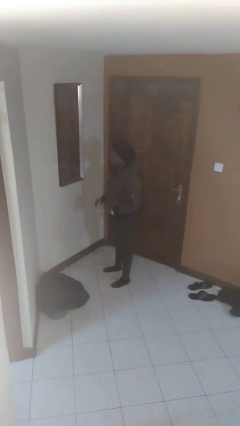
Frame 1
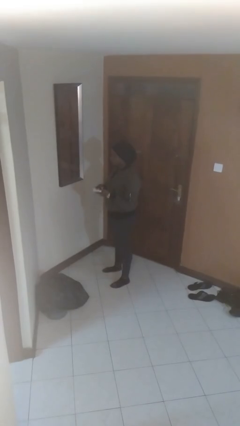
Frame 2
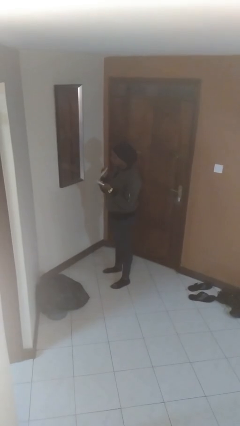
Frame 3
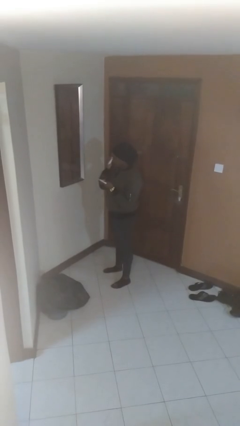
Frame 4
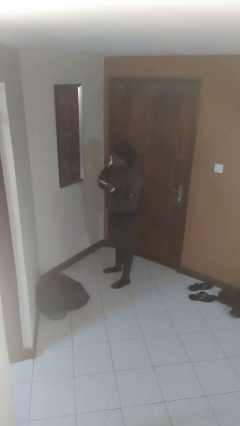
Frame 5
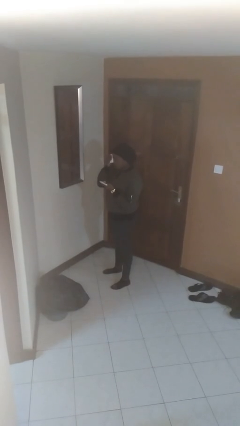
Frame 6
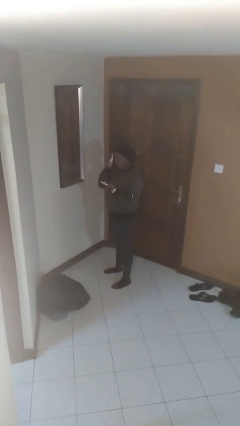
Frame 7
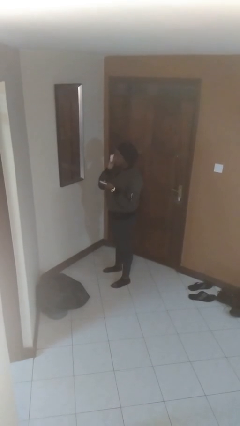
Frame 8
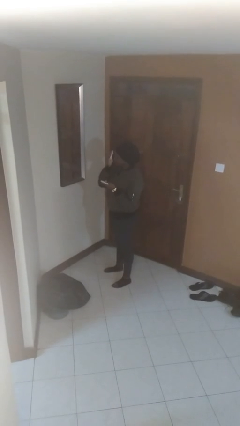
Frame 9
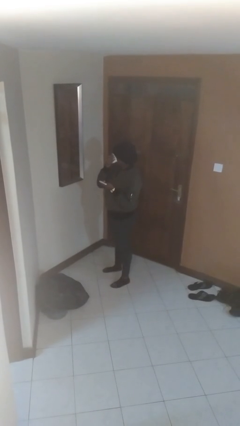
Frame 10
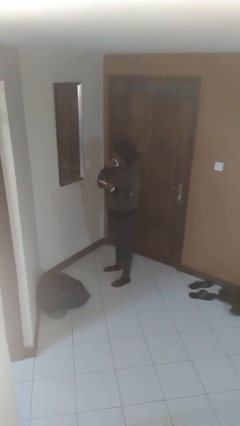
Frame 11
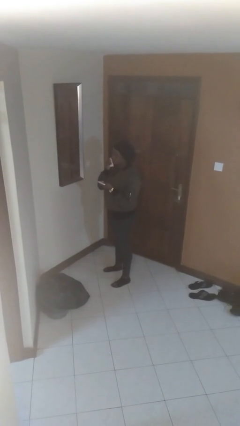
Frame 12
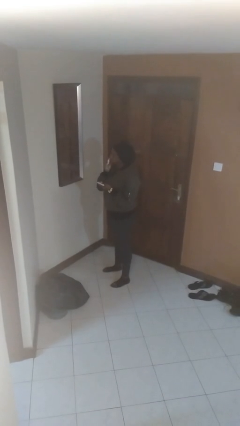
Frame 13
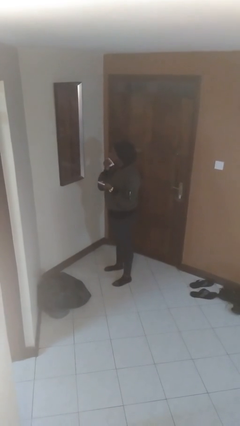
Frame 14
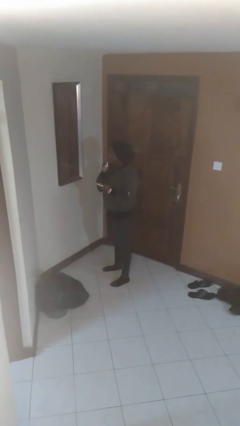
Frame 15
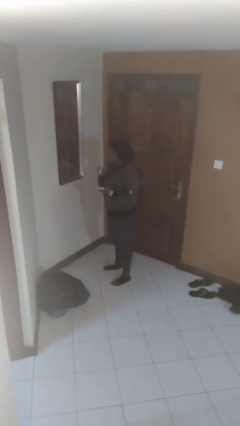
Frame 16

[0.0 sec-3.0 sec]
person applies foundation makeup

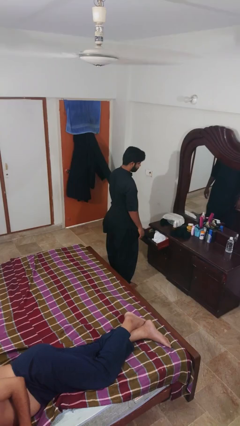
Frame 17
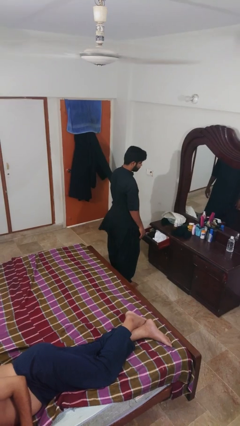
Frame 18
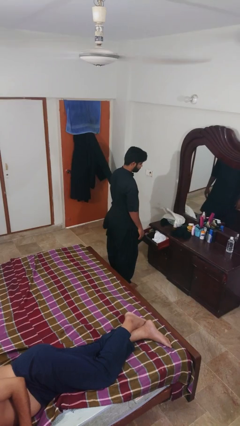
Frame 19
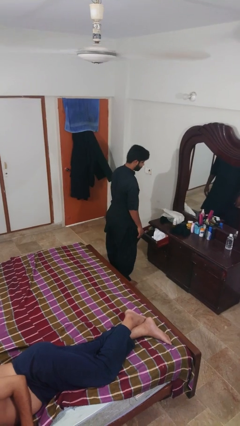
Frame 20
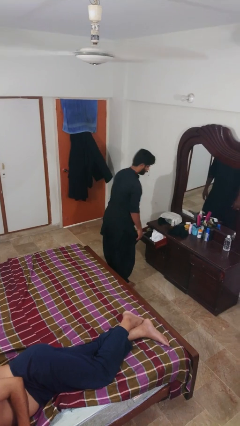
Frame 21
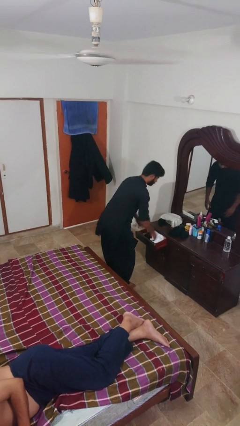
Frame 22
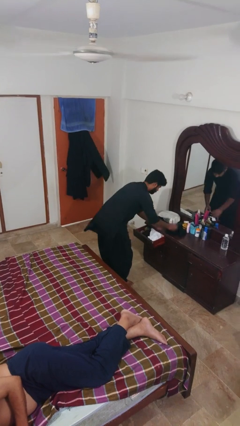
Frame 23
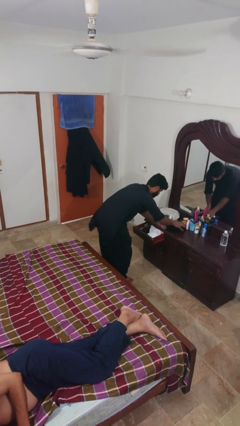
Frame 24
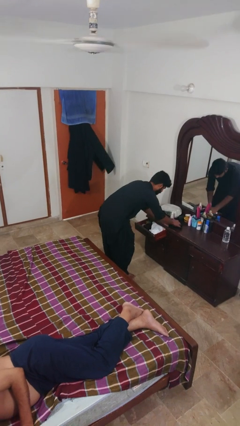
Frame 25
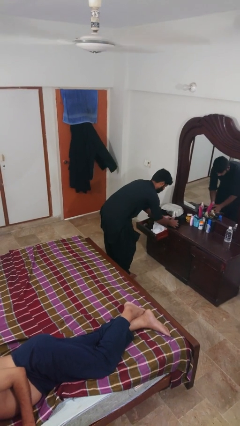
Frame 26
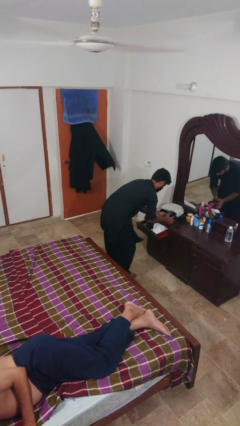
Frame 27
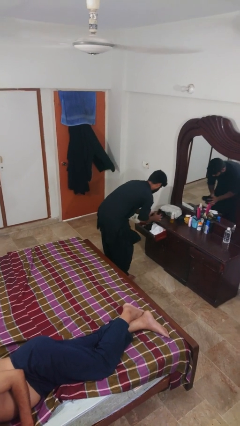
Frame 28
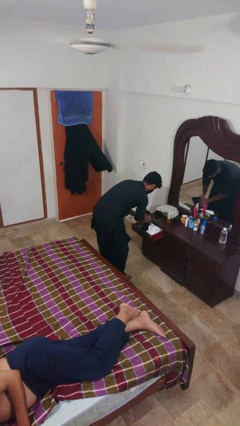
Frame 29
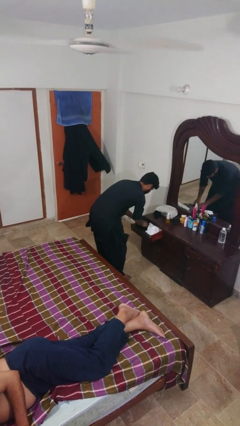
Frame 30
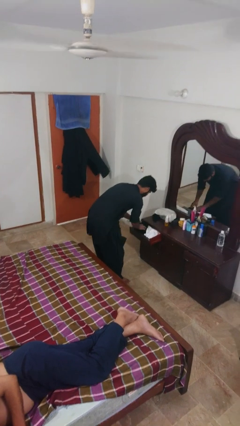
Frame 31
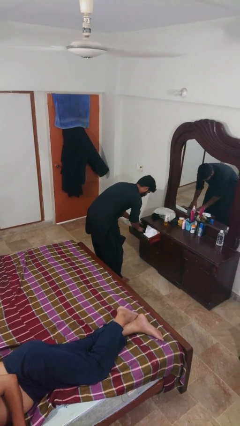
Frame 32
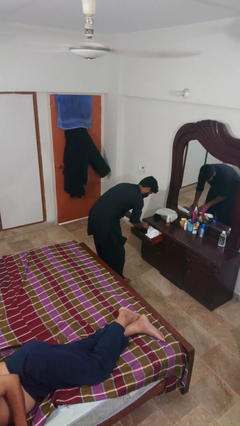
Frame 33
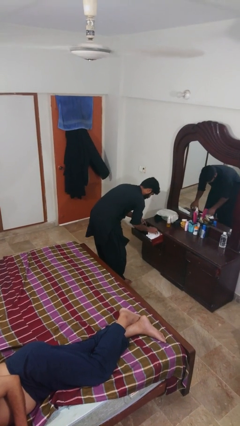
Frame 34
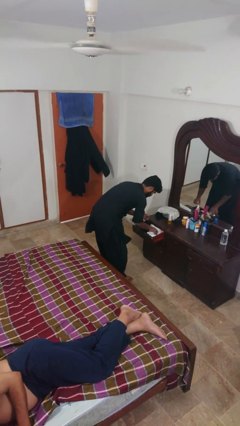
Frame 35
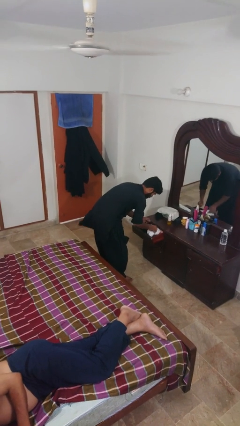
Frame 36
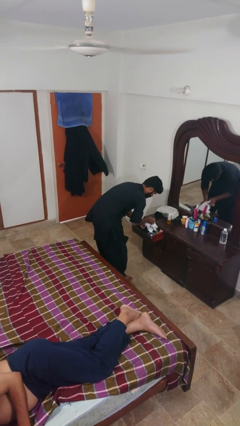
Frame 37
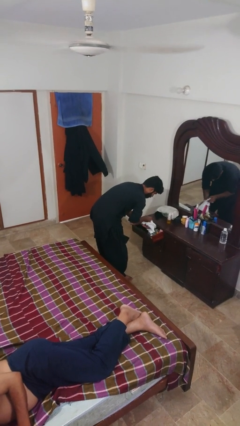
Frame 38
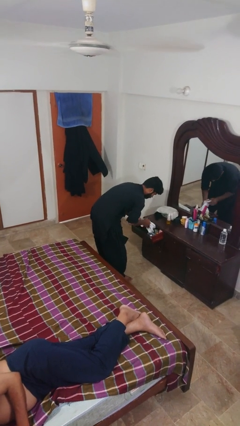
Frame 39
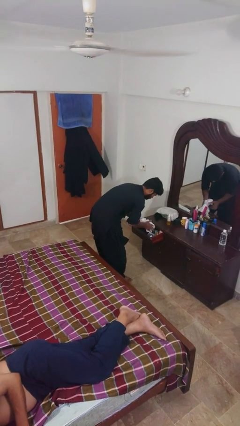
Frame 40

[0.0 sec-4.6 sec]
person puts clothes into dresser

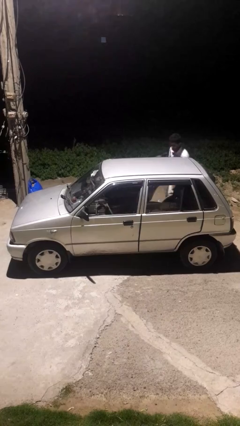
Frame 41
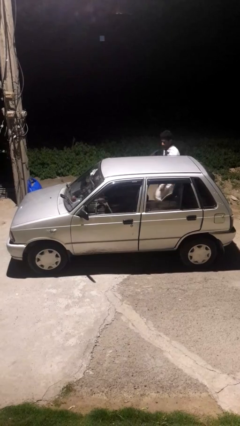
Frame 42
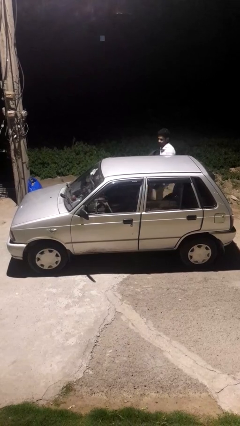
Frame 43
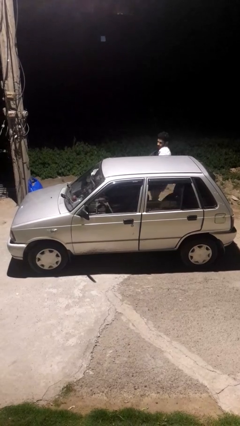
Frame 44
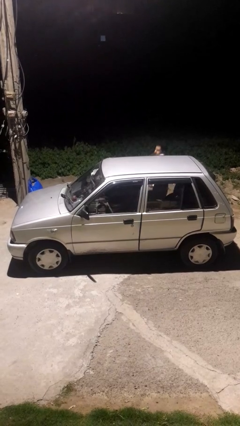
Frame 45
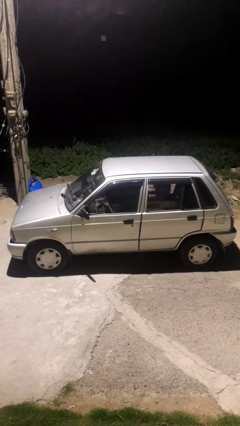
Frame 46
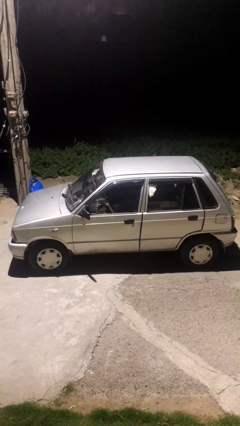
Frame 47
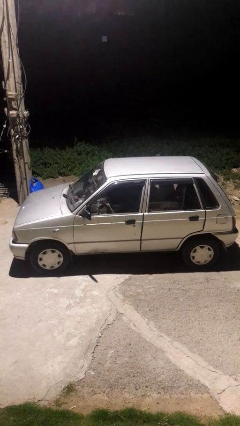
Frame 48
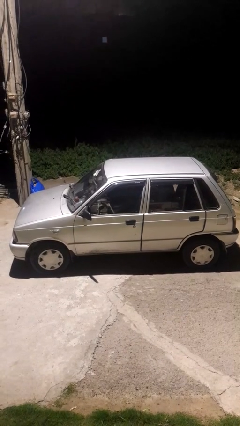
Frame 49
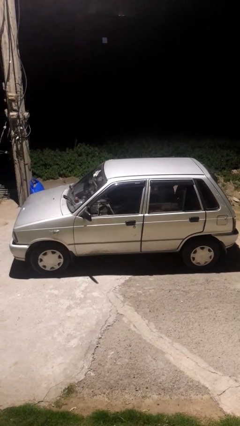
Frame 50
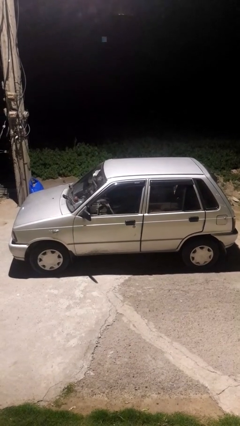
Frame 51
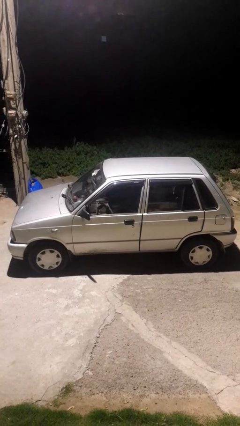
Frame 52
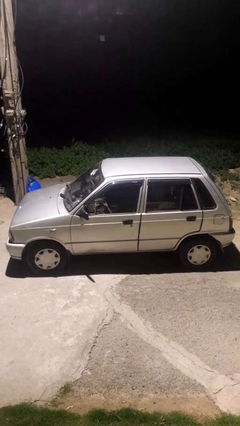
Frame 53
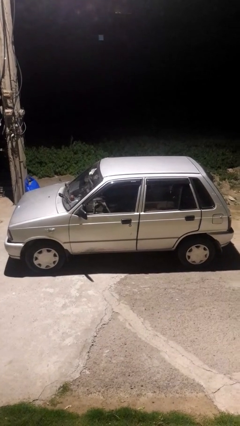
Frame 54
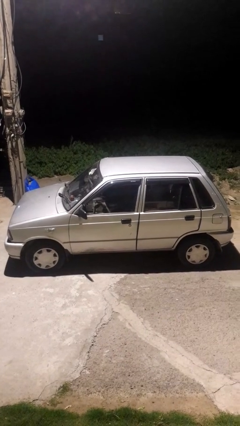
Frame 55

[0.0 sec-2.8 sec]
car picks up person

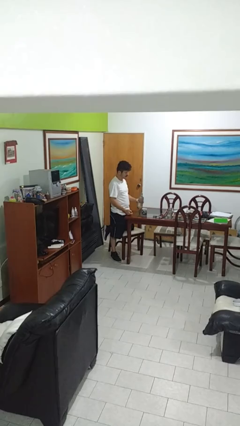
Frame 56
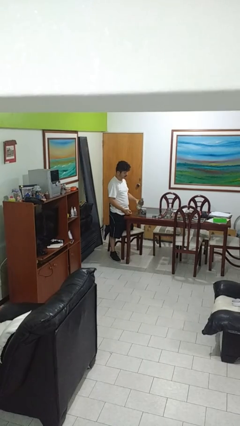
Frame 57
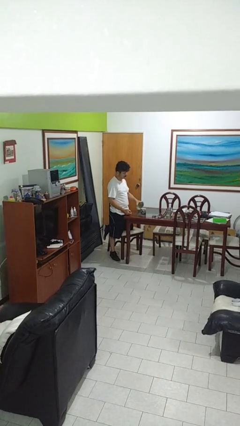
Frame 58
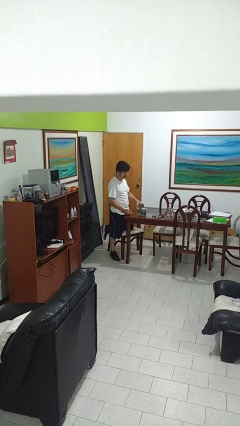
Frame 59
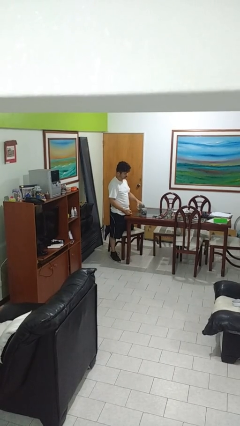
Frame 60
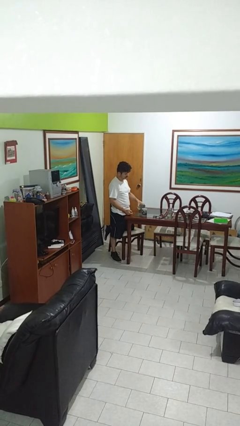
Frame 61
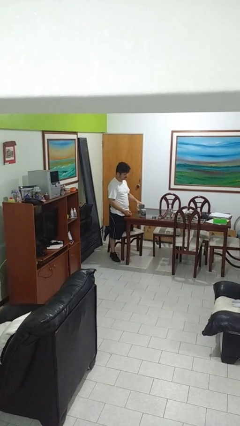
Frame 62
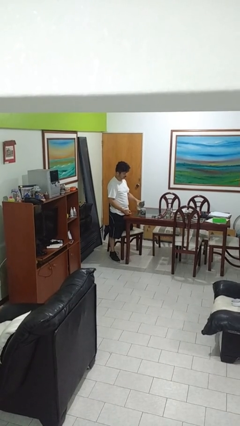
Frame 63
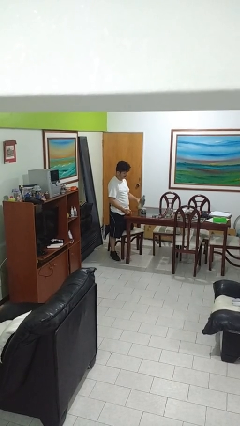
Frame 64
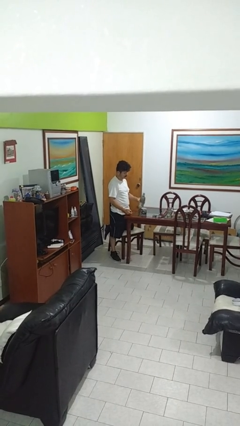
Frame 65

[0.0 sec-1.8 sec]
person pours liquid into cup

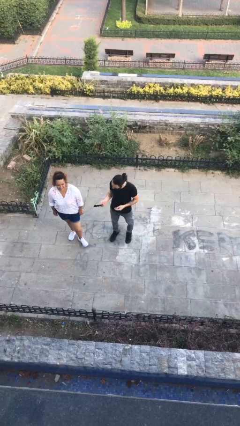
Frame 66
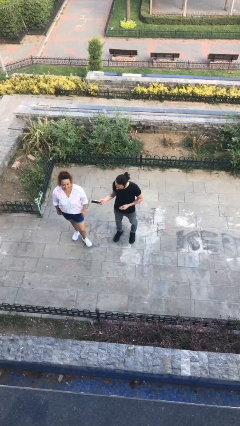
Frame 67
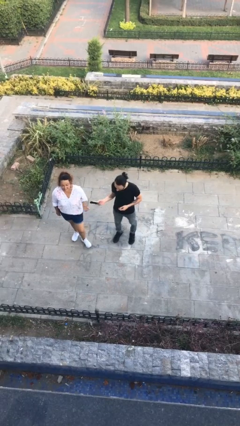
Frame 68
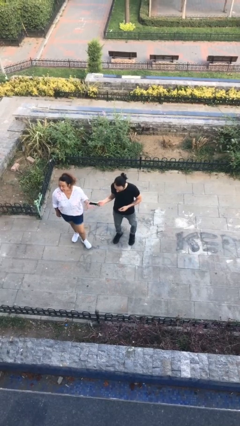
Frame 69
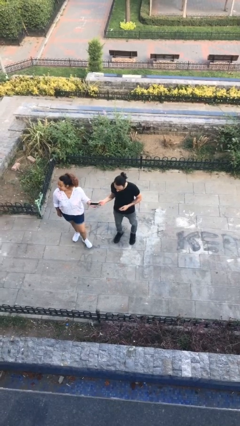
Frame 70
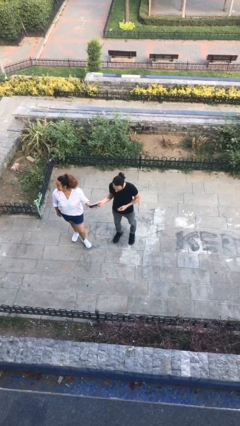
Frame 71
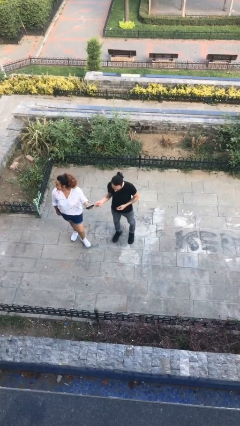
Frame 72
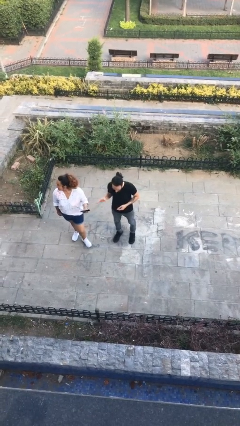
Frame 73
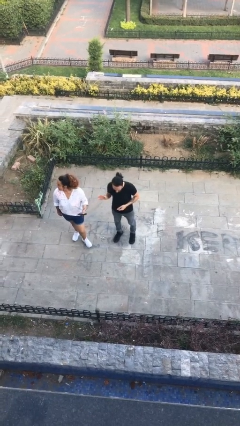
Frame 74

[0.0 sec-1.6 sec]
person transfers object to person

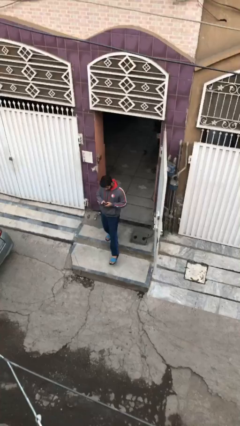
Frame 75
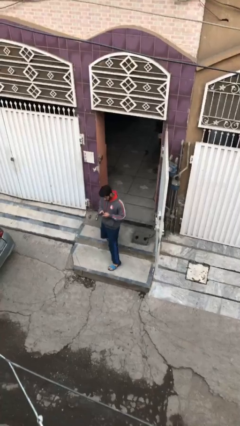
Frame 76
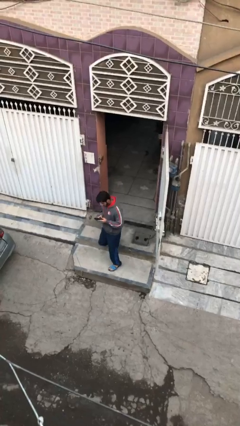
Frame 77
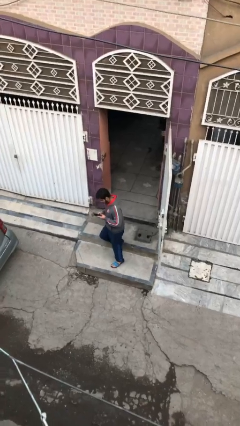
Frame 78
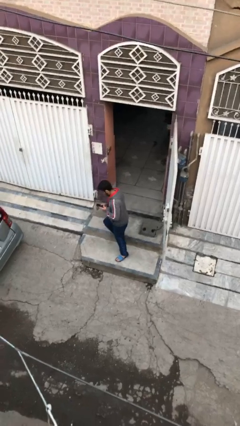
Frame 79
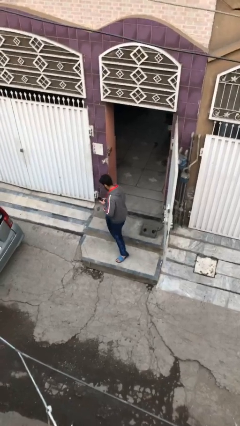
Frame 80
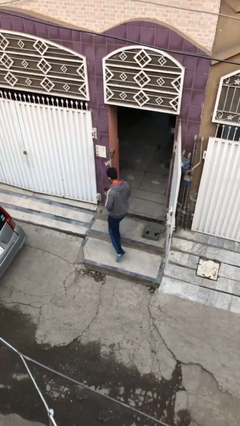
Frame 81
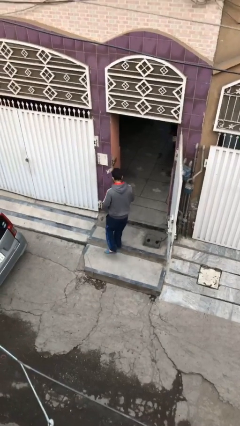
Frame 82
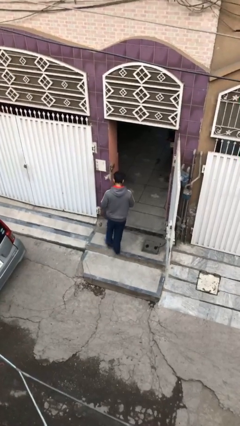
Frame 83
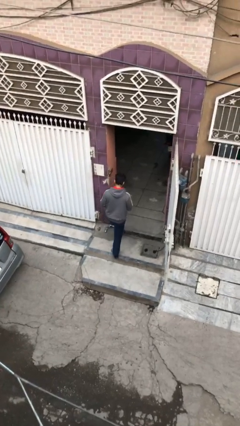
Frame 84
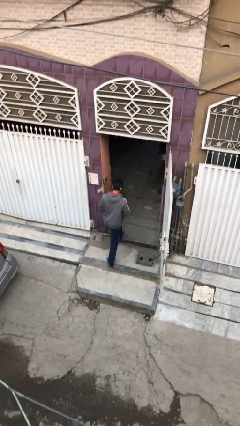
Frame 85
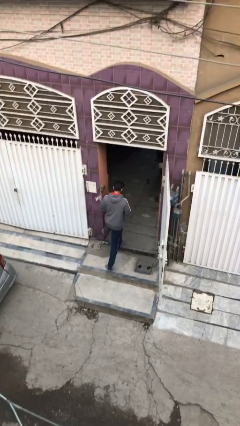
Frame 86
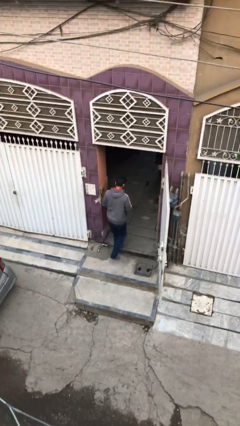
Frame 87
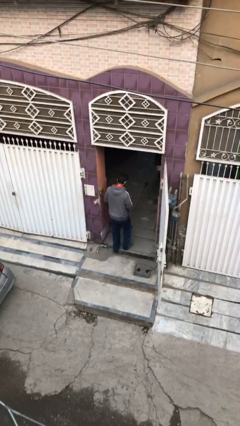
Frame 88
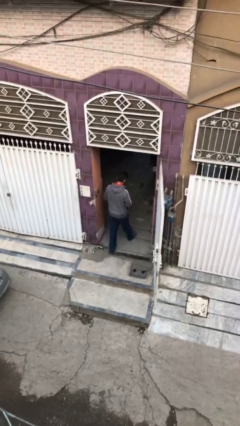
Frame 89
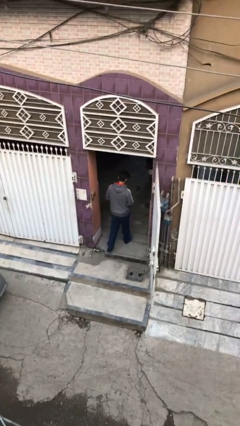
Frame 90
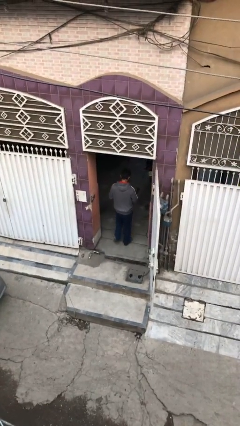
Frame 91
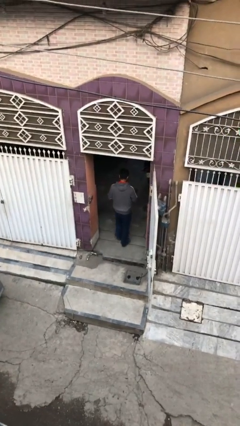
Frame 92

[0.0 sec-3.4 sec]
person exits scene through structure

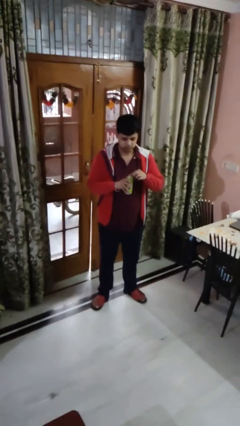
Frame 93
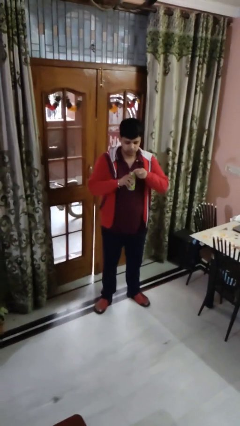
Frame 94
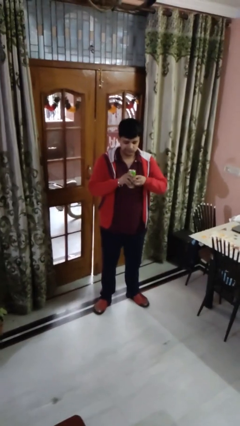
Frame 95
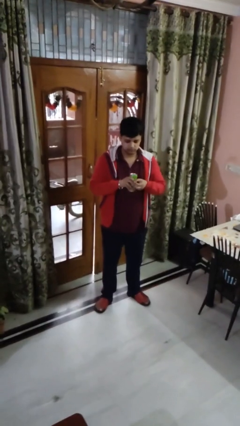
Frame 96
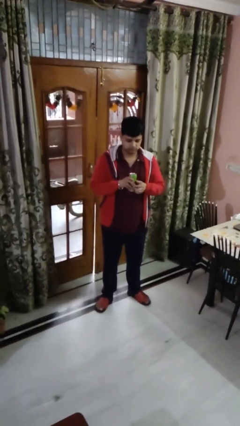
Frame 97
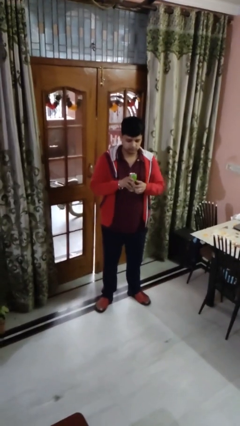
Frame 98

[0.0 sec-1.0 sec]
person opens beverage can
